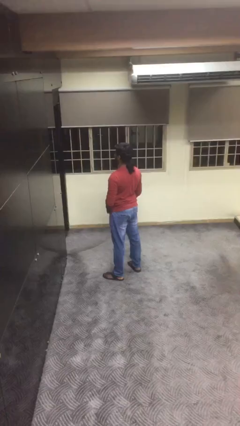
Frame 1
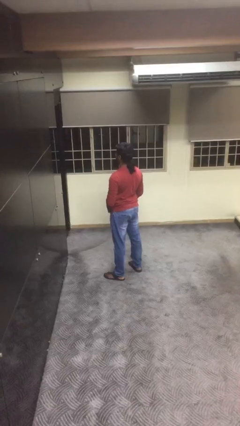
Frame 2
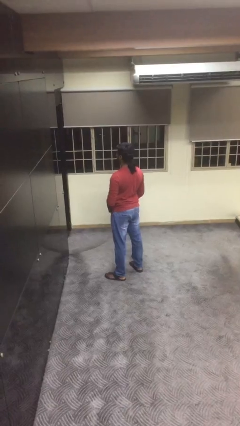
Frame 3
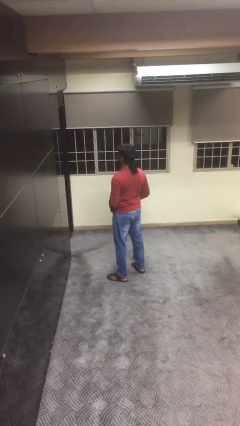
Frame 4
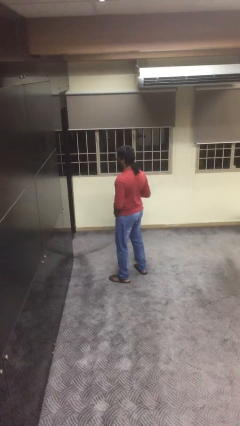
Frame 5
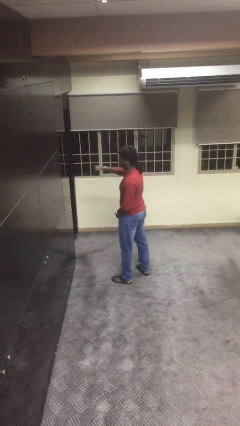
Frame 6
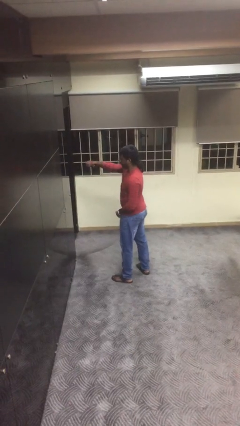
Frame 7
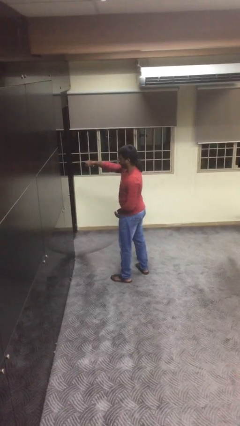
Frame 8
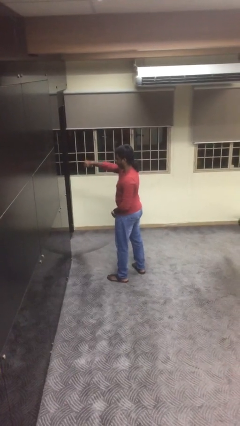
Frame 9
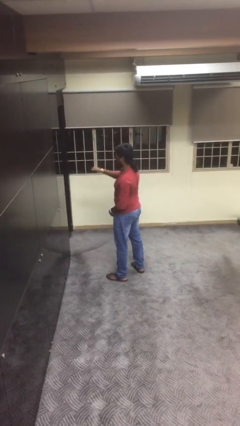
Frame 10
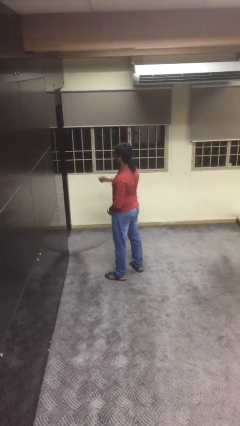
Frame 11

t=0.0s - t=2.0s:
person punches

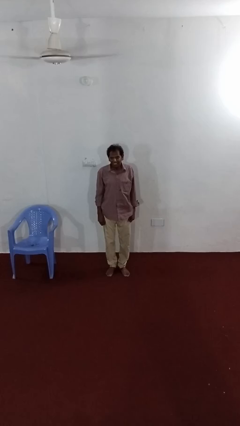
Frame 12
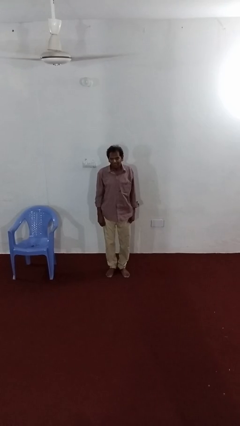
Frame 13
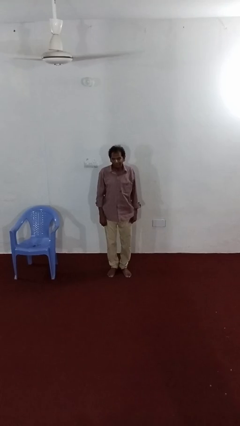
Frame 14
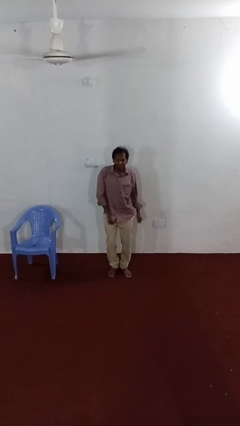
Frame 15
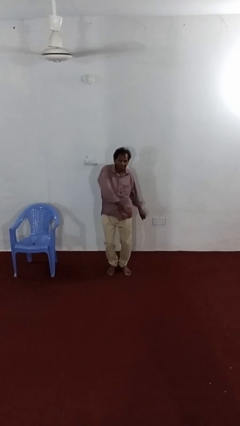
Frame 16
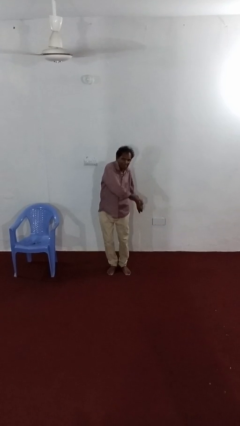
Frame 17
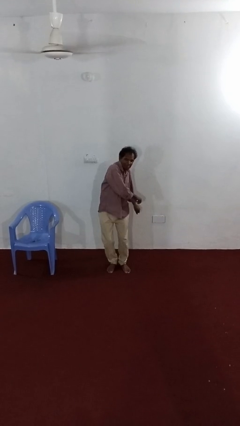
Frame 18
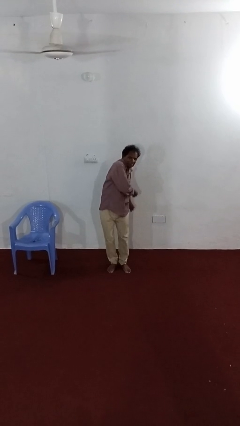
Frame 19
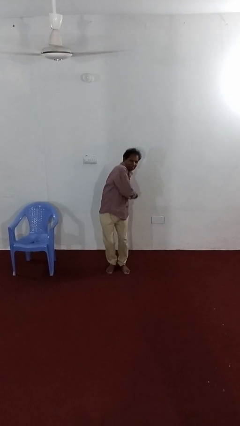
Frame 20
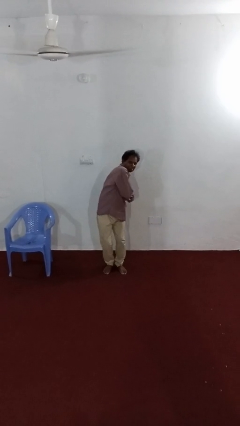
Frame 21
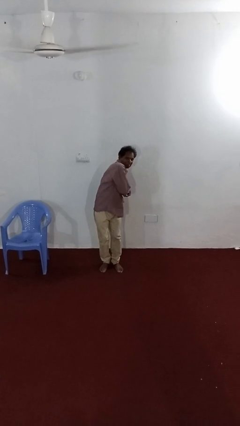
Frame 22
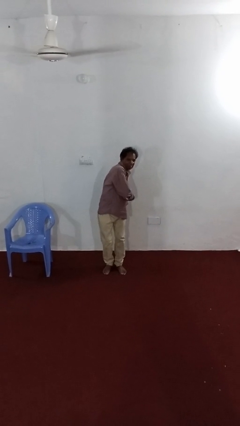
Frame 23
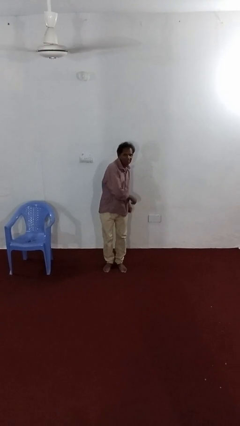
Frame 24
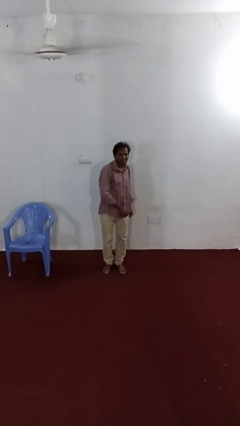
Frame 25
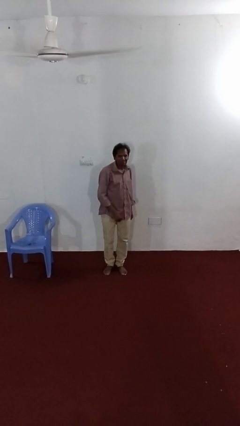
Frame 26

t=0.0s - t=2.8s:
person dances in place

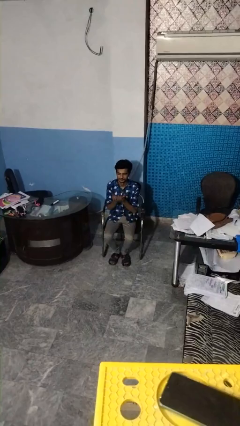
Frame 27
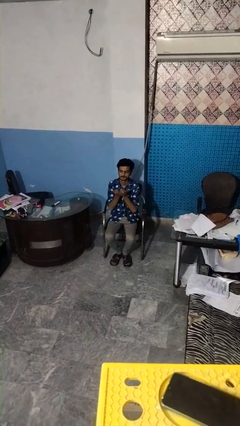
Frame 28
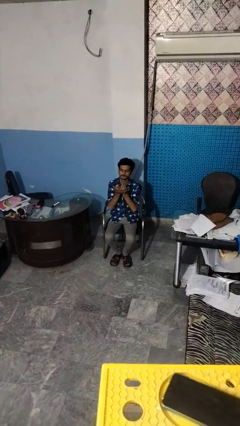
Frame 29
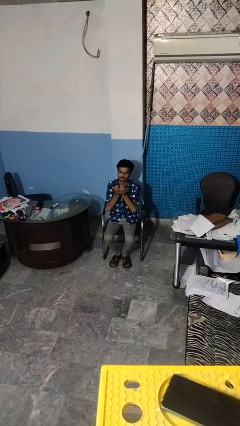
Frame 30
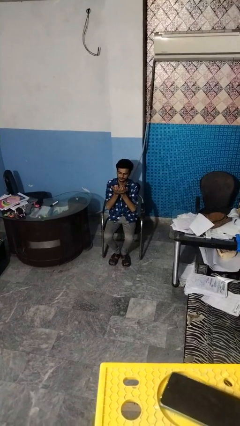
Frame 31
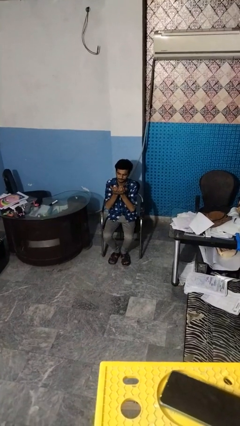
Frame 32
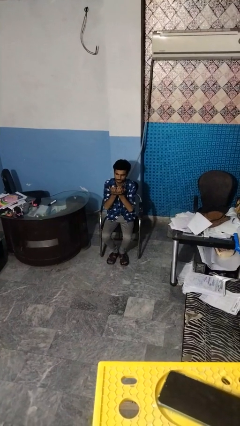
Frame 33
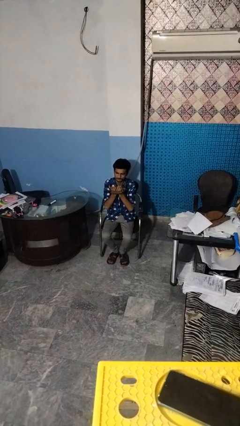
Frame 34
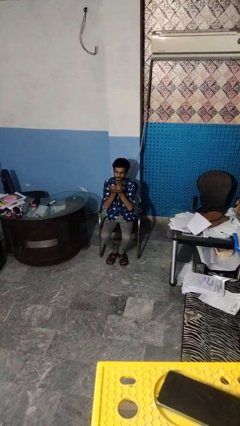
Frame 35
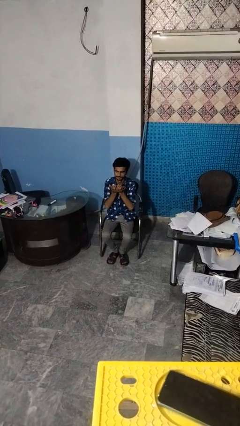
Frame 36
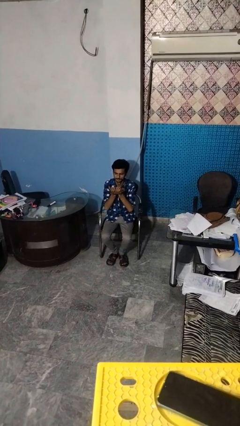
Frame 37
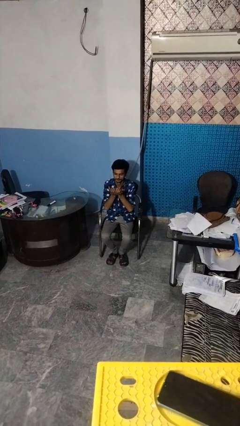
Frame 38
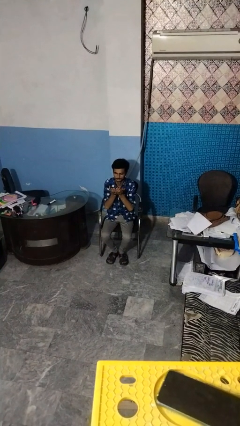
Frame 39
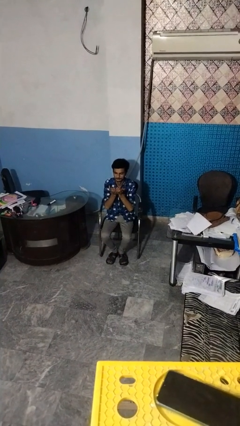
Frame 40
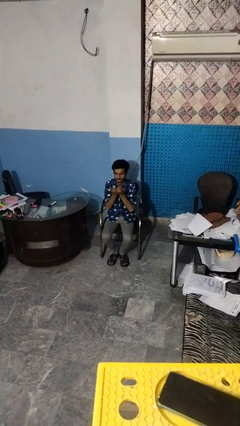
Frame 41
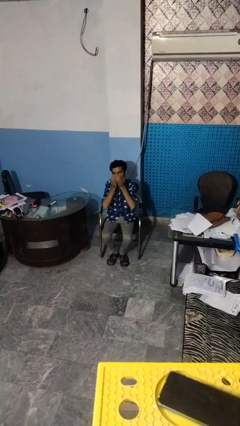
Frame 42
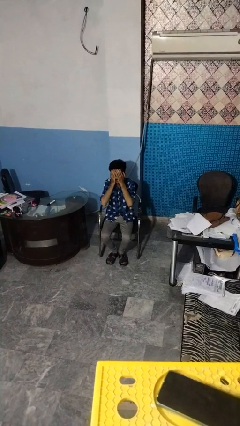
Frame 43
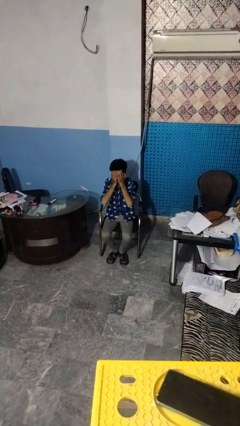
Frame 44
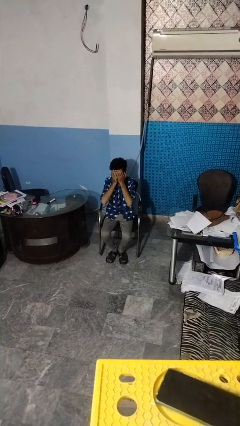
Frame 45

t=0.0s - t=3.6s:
person prays

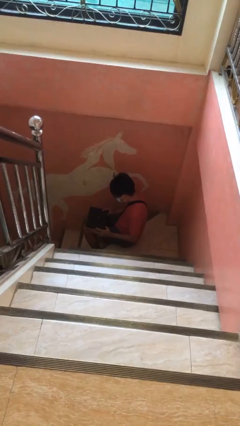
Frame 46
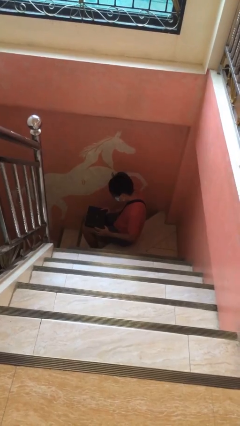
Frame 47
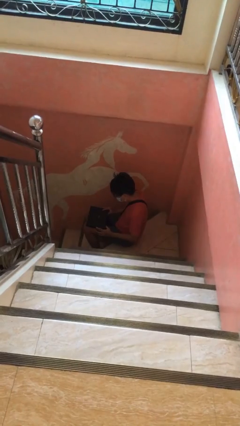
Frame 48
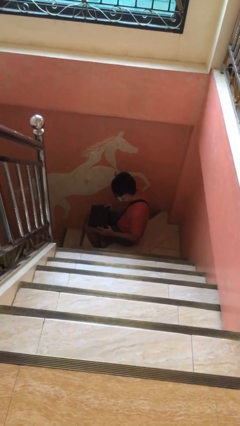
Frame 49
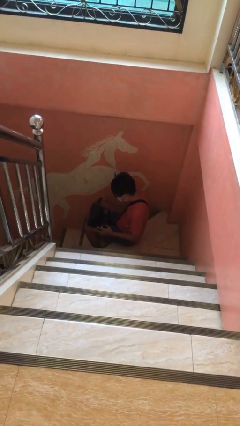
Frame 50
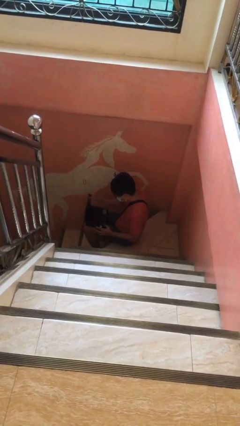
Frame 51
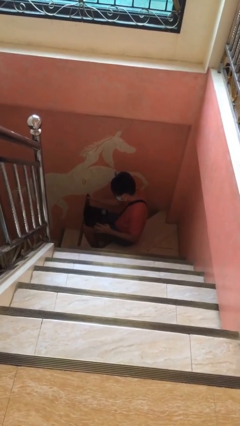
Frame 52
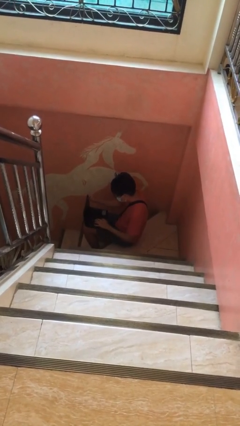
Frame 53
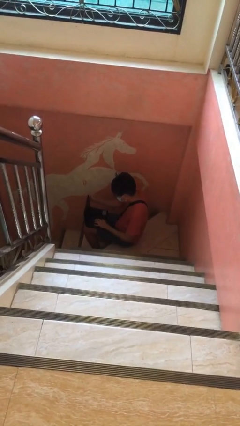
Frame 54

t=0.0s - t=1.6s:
person interacts with laptop

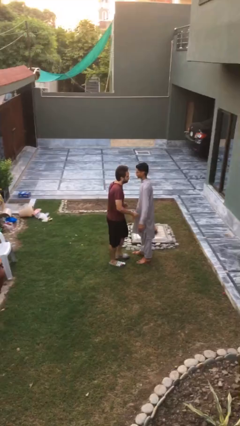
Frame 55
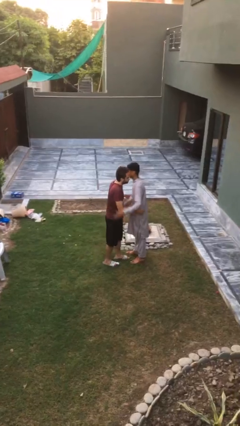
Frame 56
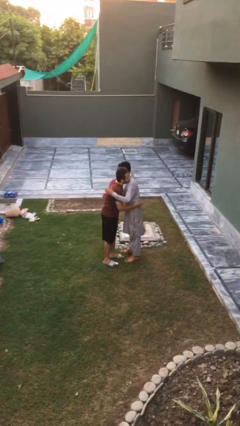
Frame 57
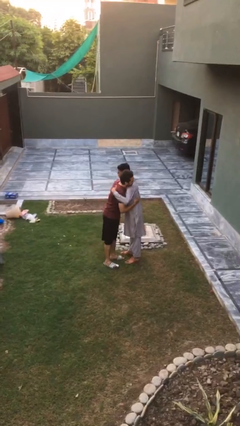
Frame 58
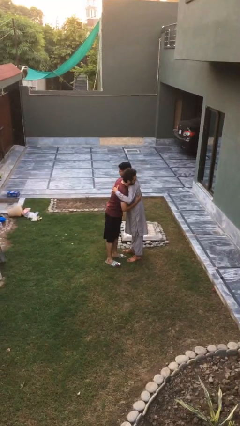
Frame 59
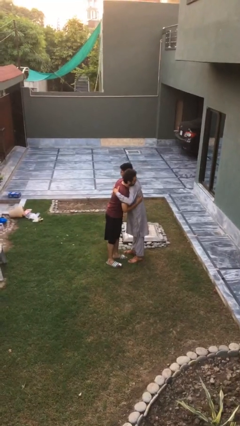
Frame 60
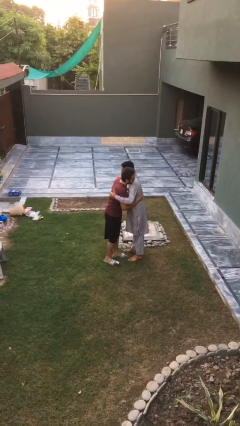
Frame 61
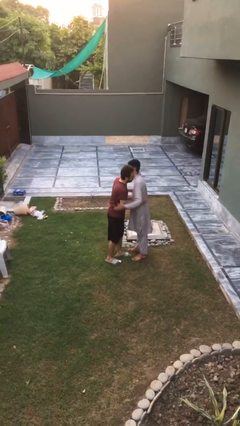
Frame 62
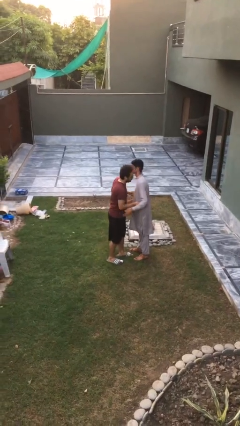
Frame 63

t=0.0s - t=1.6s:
person embraces person

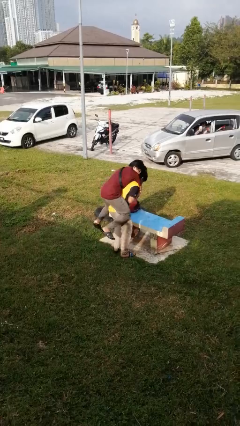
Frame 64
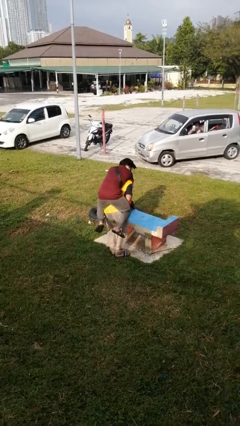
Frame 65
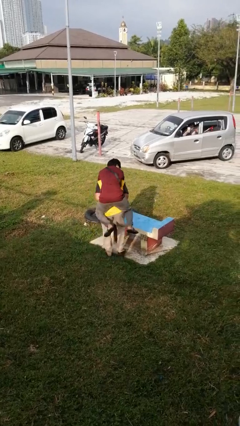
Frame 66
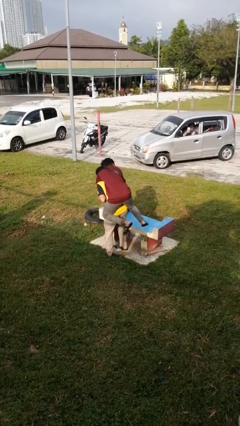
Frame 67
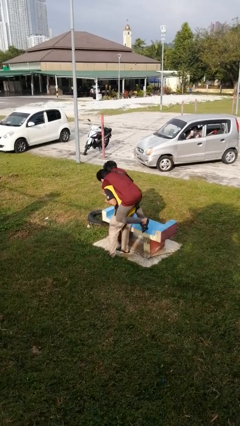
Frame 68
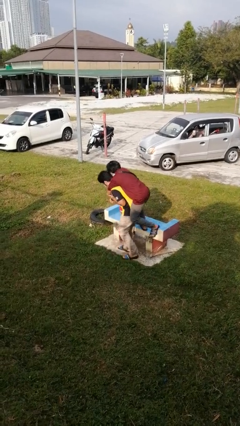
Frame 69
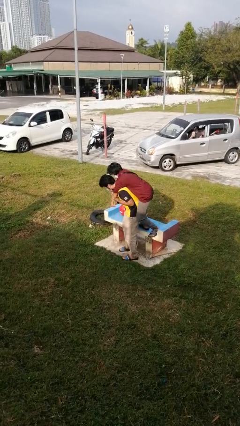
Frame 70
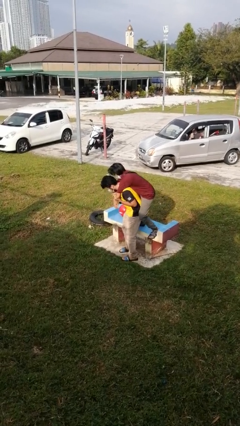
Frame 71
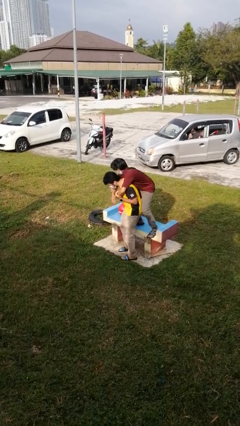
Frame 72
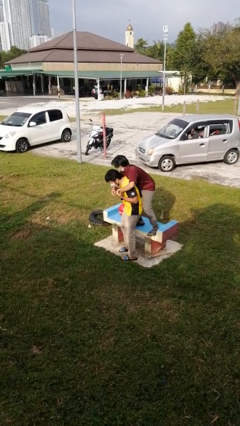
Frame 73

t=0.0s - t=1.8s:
person puts down person

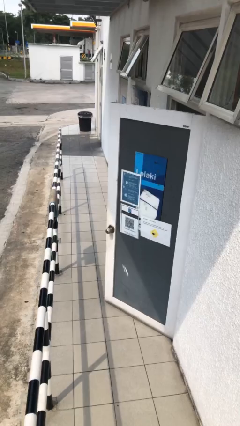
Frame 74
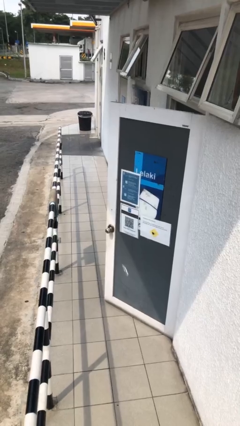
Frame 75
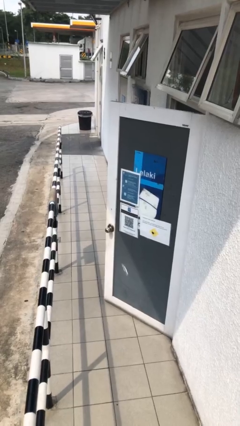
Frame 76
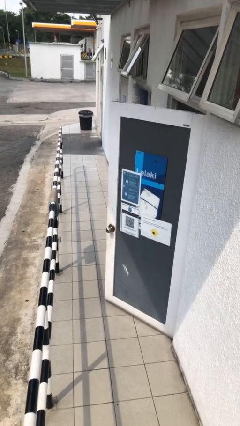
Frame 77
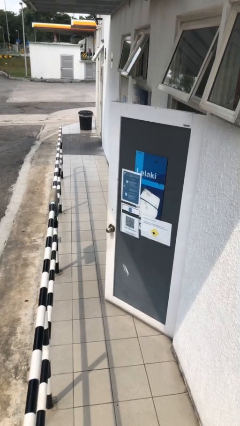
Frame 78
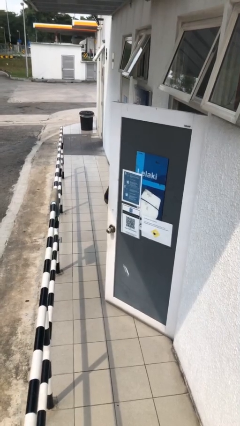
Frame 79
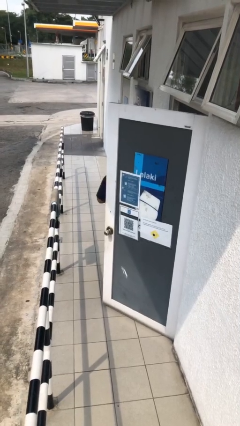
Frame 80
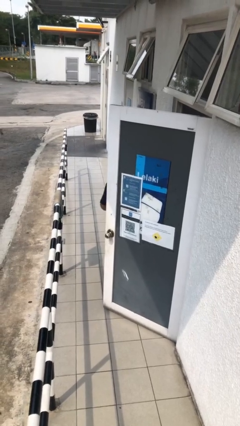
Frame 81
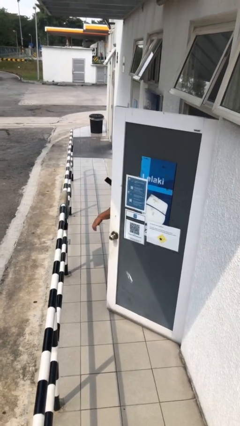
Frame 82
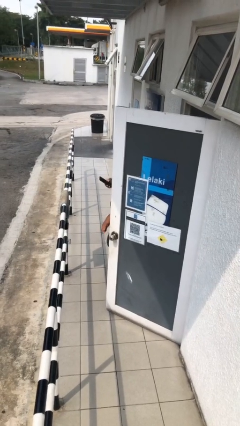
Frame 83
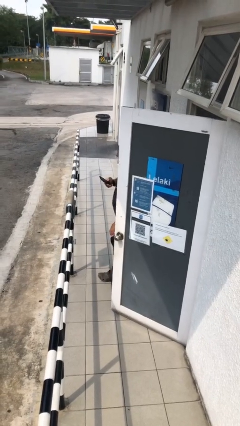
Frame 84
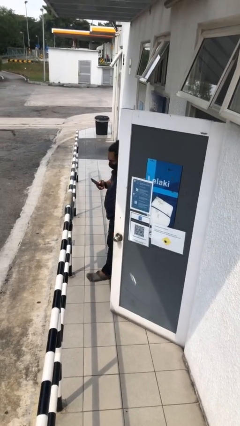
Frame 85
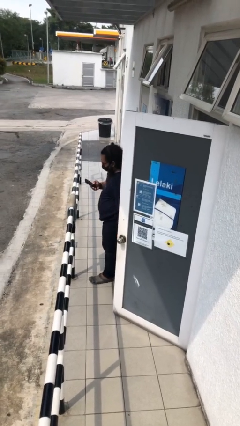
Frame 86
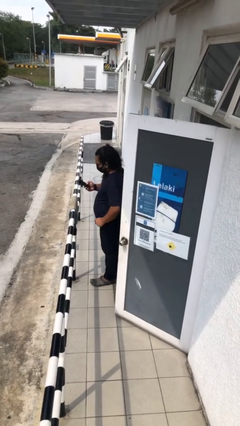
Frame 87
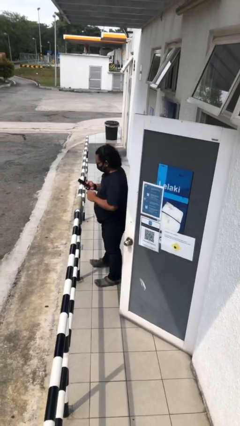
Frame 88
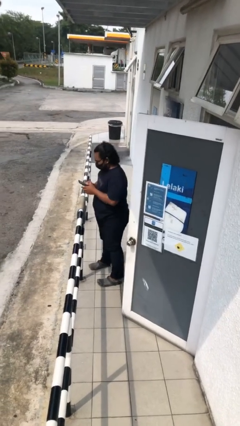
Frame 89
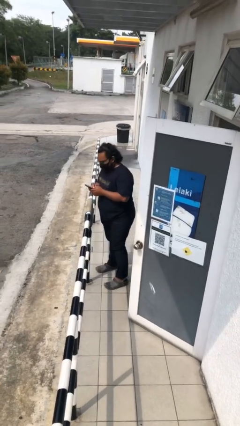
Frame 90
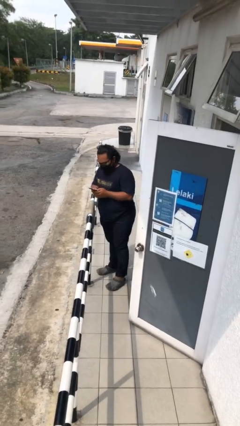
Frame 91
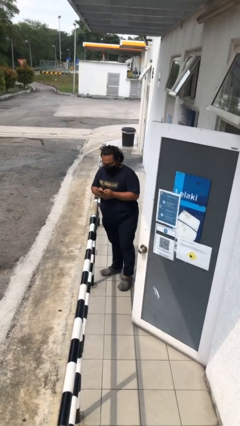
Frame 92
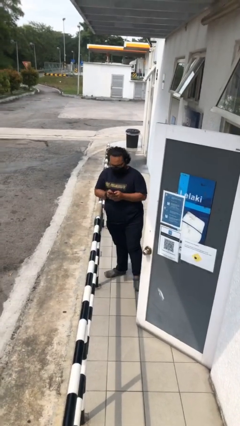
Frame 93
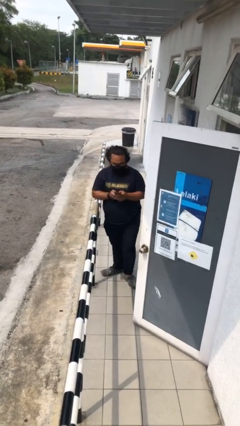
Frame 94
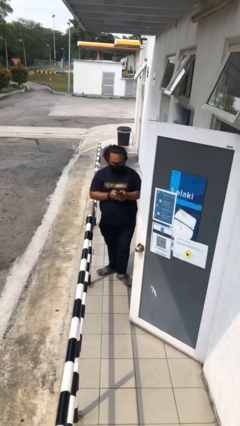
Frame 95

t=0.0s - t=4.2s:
person enters scene through structure
